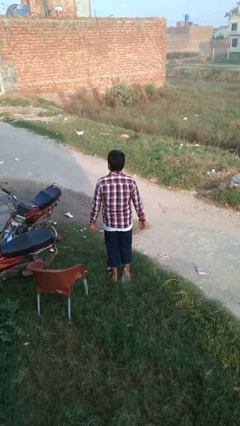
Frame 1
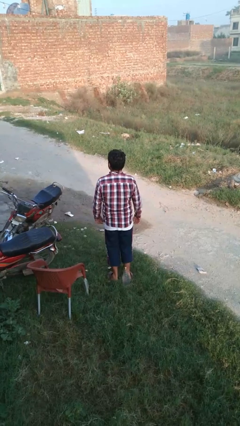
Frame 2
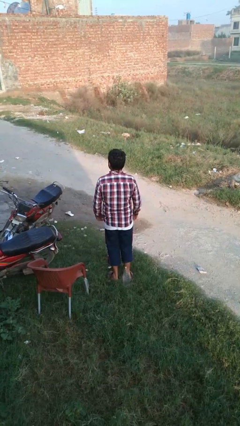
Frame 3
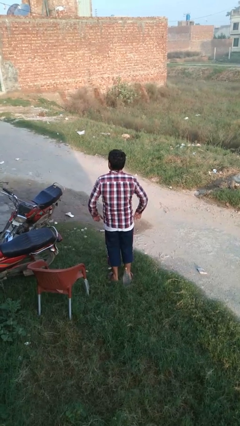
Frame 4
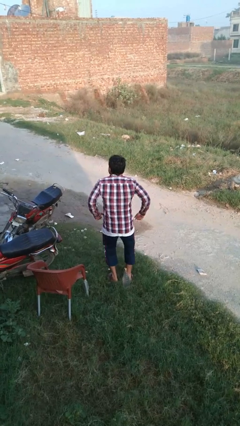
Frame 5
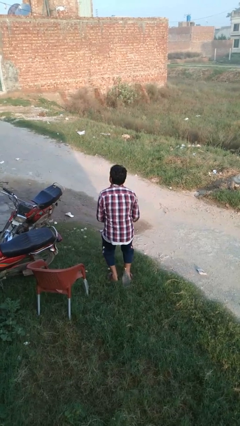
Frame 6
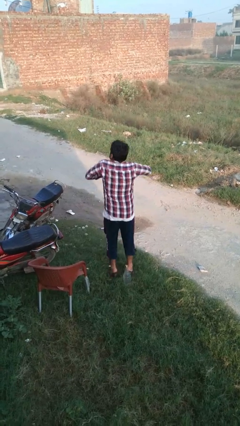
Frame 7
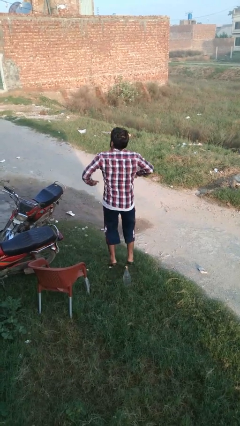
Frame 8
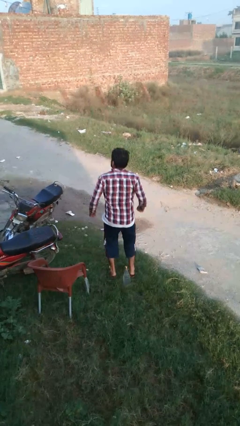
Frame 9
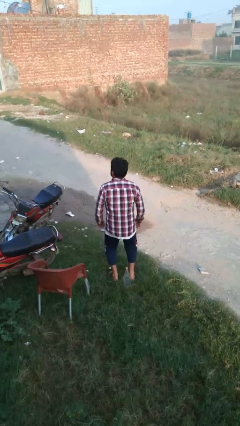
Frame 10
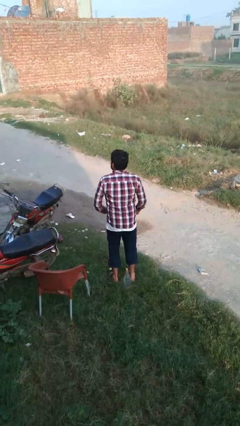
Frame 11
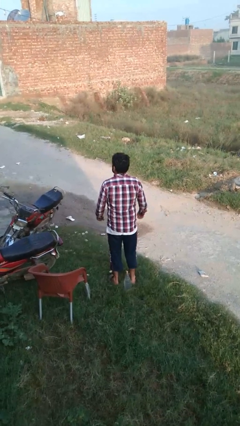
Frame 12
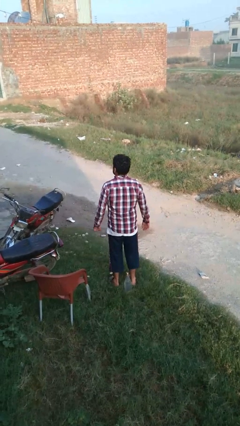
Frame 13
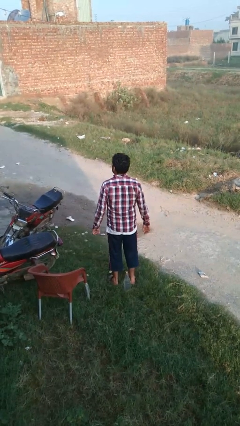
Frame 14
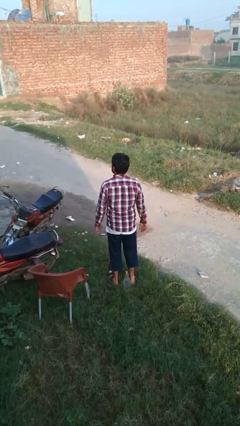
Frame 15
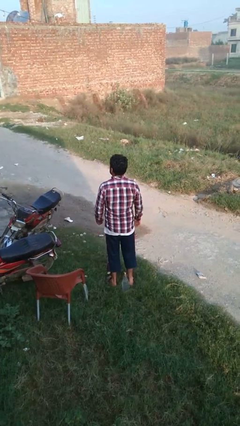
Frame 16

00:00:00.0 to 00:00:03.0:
person jumps

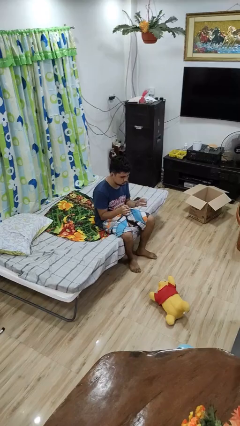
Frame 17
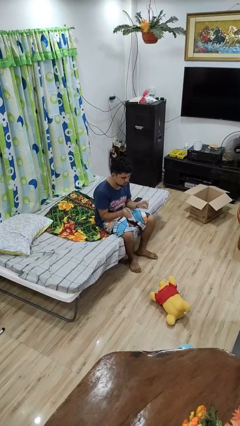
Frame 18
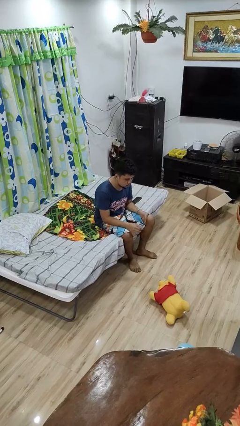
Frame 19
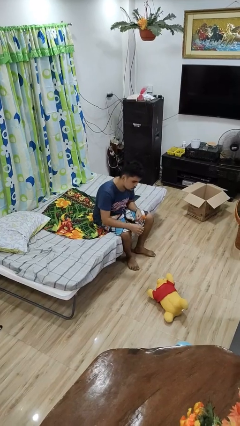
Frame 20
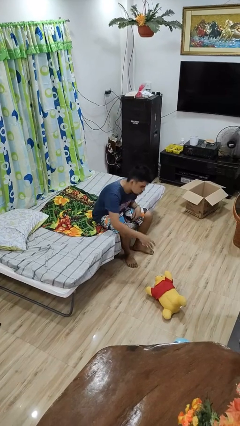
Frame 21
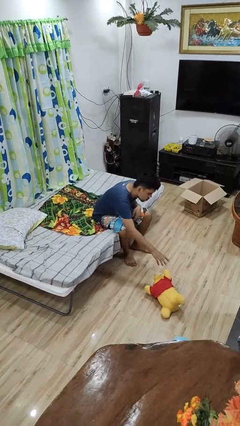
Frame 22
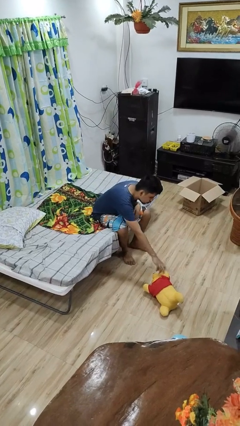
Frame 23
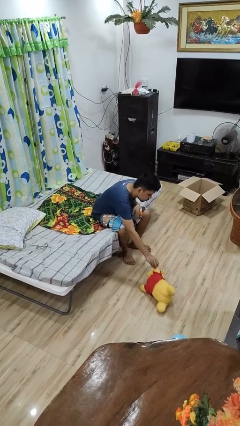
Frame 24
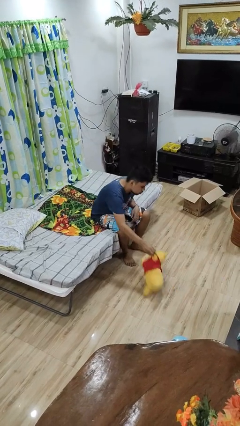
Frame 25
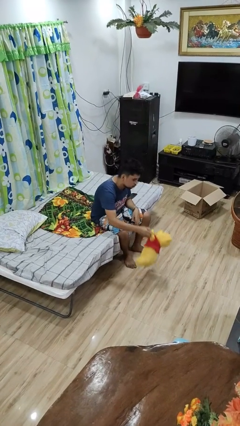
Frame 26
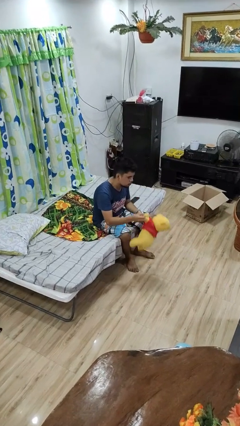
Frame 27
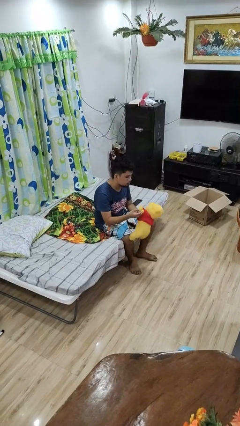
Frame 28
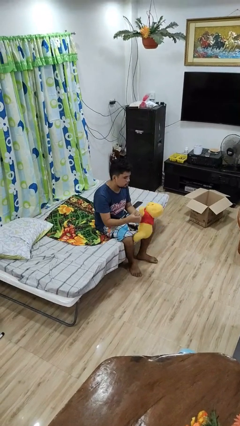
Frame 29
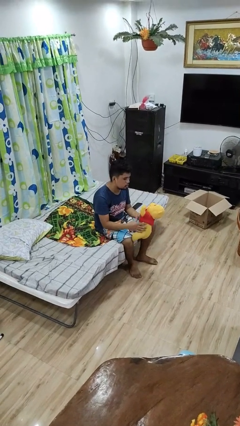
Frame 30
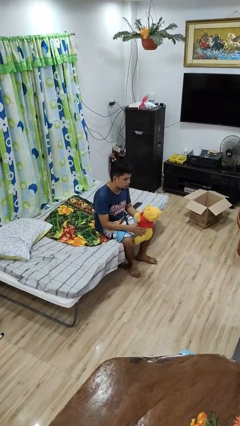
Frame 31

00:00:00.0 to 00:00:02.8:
person picks up object from floor

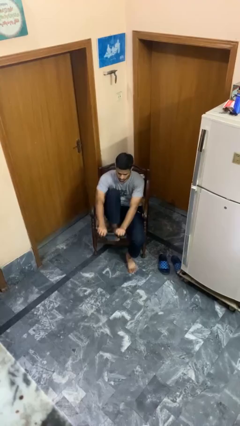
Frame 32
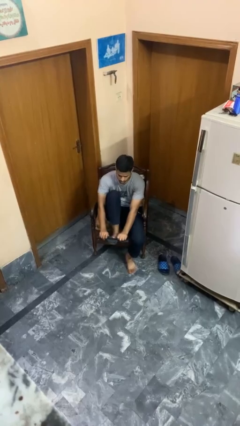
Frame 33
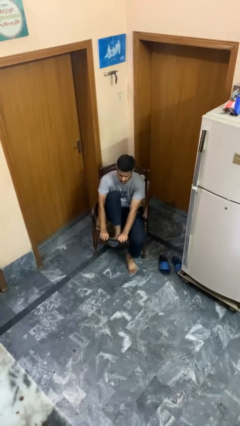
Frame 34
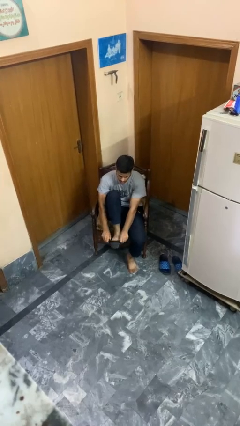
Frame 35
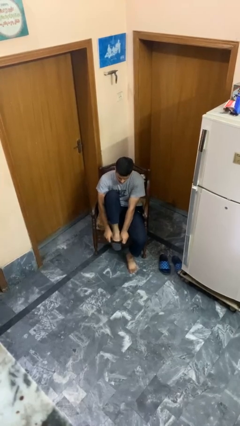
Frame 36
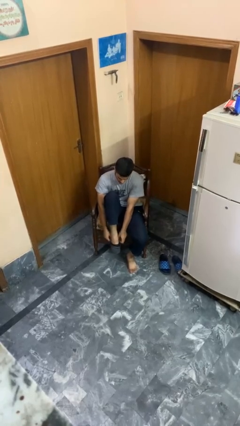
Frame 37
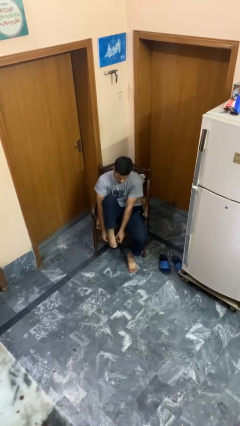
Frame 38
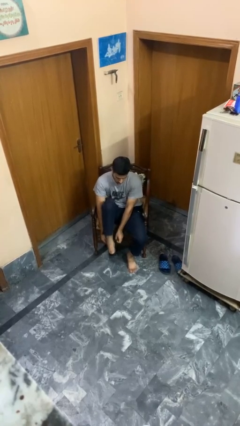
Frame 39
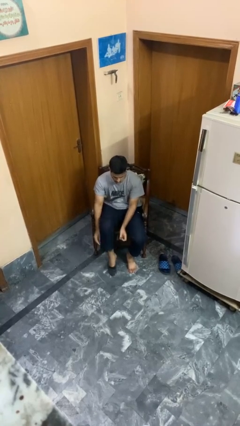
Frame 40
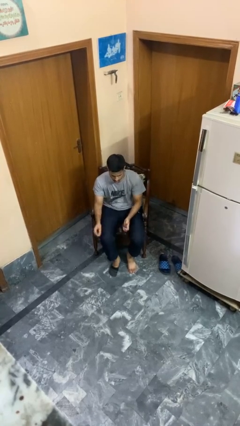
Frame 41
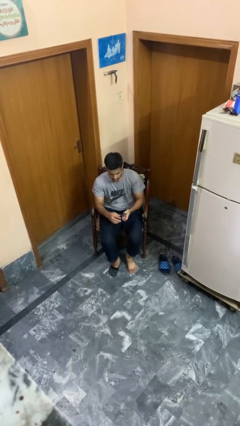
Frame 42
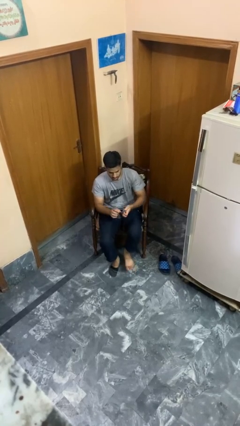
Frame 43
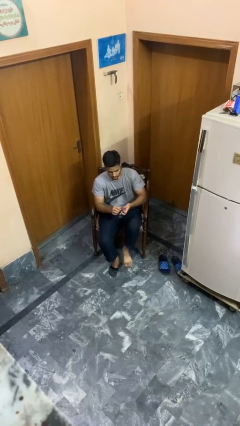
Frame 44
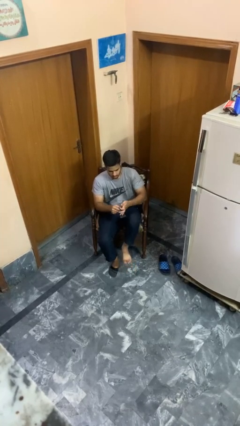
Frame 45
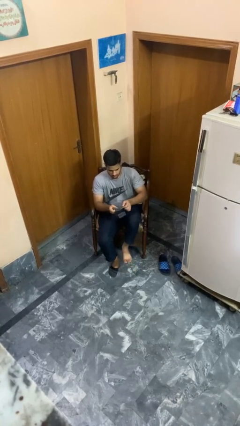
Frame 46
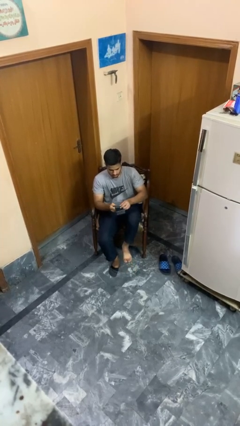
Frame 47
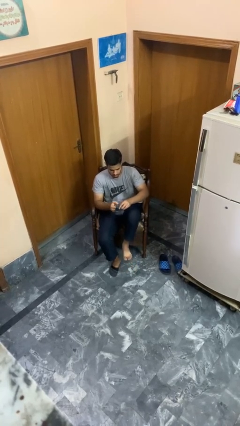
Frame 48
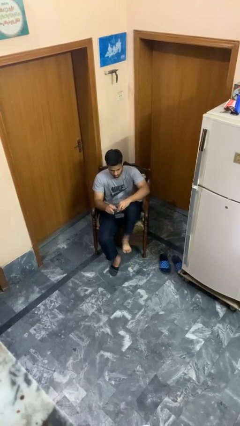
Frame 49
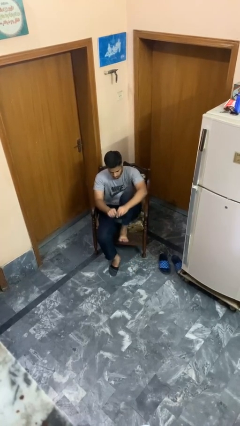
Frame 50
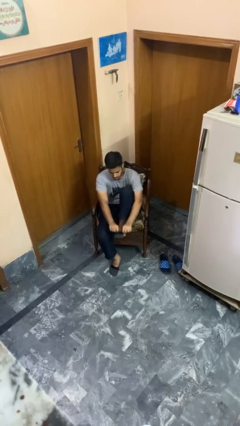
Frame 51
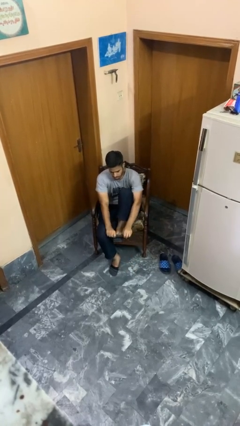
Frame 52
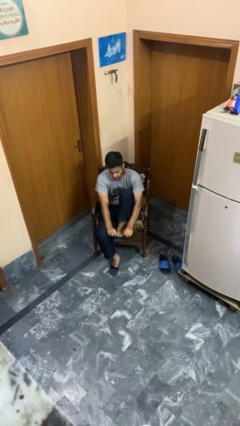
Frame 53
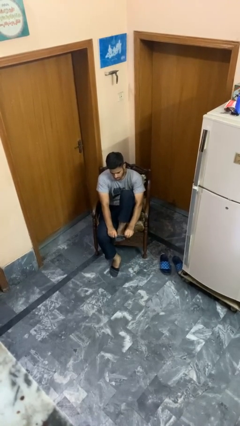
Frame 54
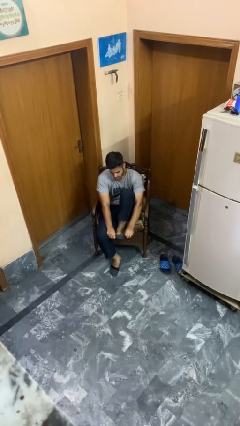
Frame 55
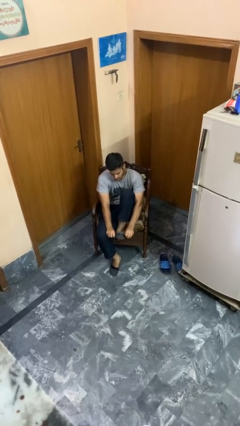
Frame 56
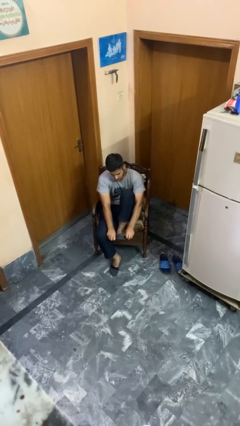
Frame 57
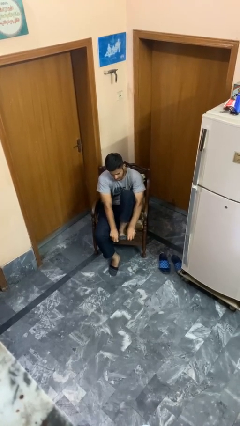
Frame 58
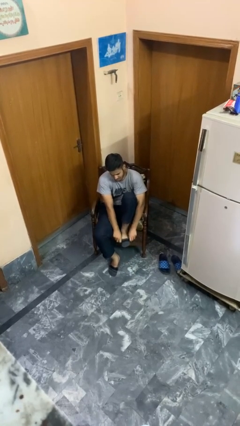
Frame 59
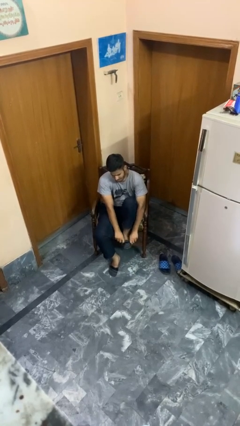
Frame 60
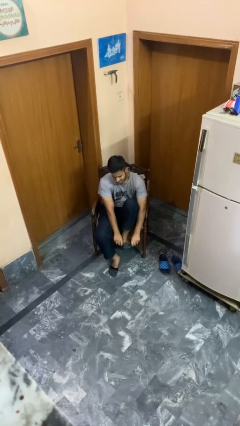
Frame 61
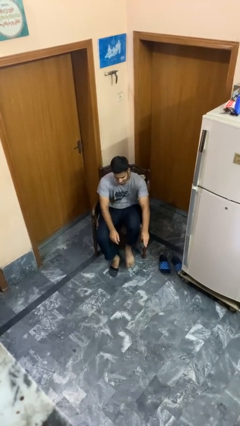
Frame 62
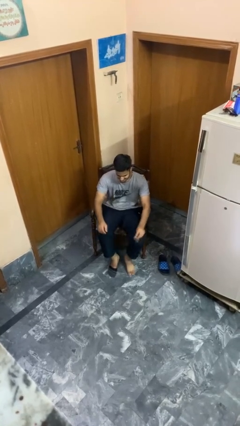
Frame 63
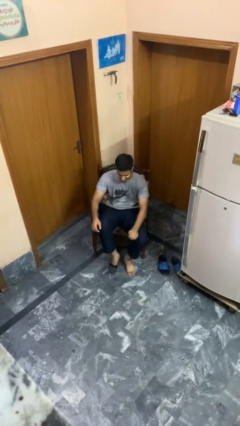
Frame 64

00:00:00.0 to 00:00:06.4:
person puts on socks

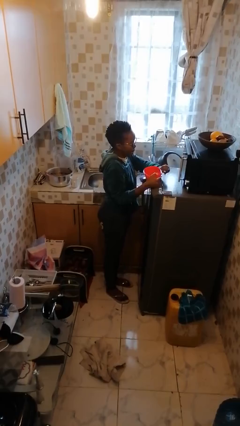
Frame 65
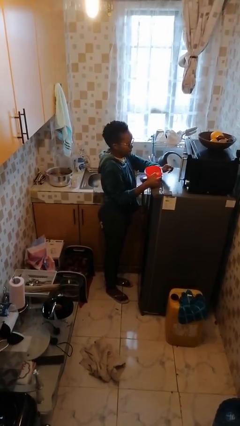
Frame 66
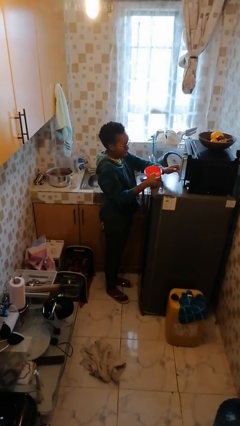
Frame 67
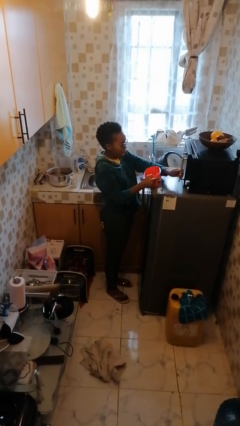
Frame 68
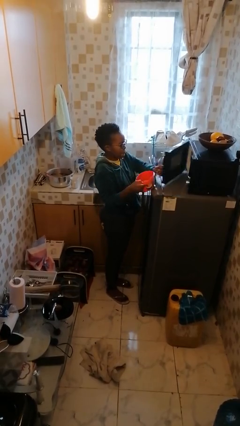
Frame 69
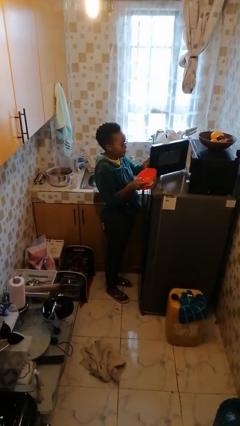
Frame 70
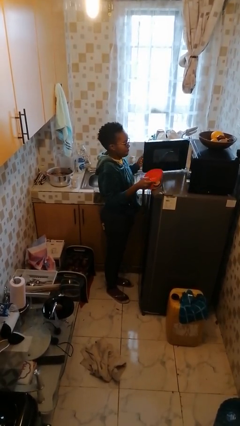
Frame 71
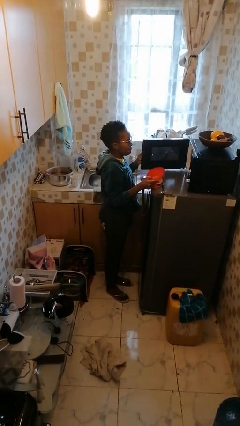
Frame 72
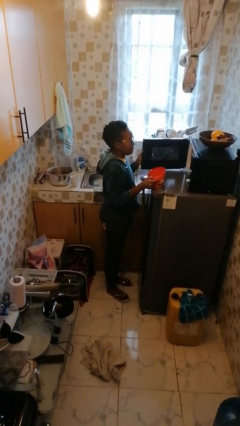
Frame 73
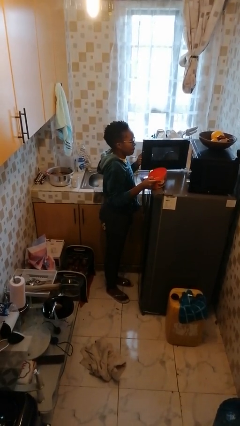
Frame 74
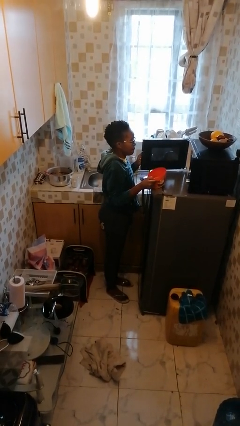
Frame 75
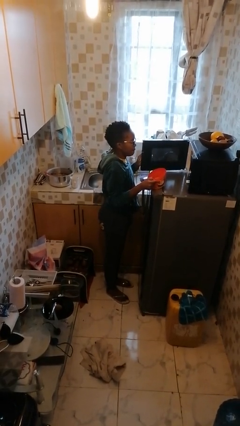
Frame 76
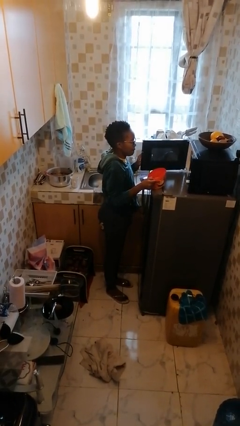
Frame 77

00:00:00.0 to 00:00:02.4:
person opens microwave

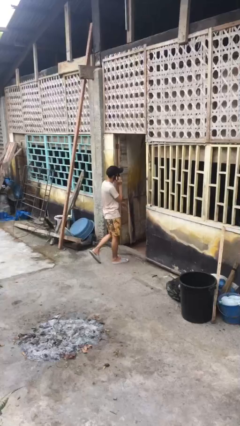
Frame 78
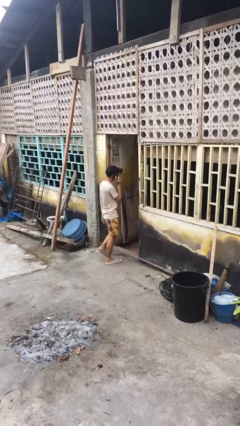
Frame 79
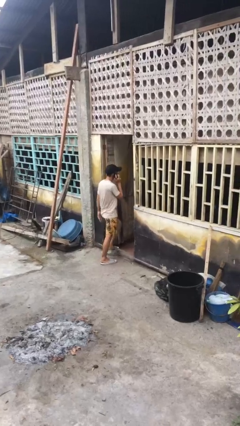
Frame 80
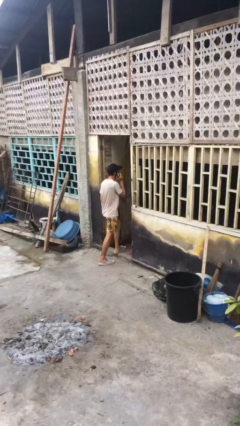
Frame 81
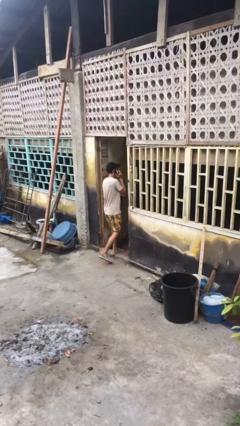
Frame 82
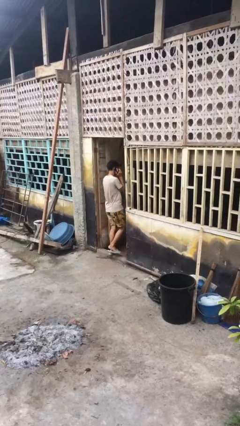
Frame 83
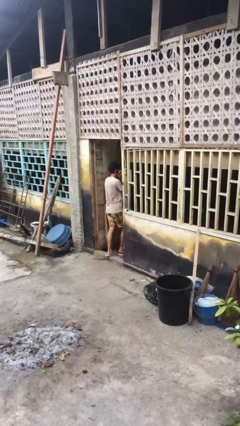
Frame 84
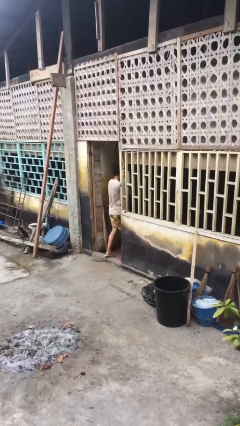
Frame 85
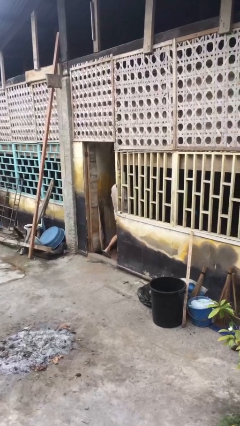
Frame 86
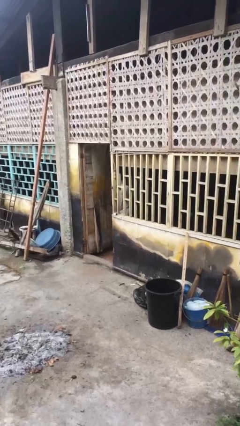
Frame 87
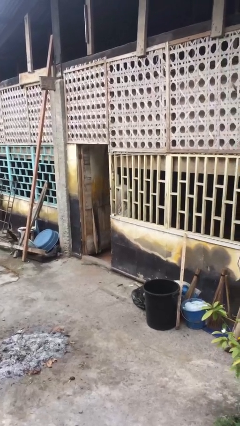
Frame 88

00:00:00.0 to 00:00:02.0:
person enters scene through structure

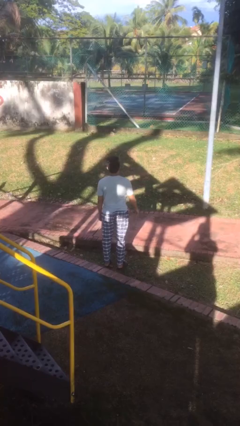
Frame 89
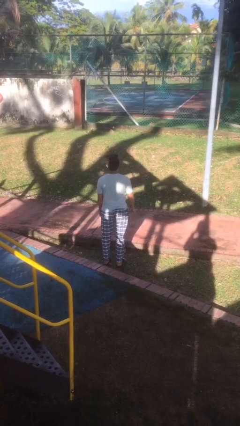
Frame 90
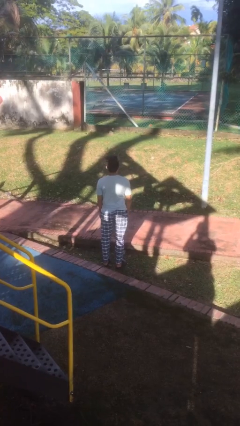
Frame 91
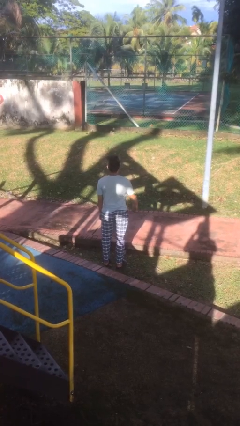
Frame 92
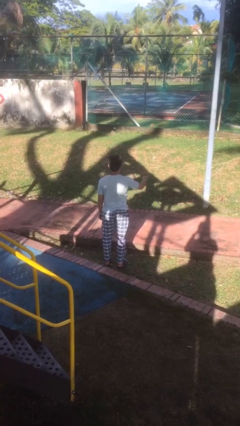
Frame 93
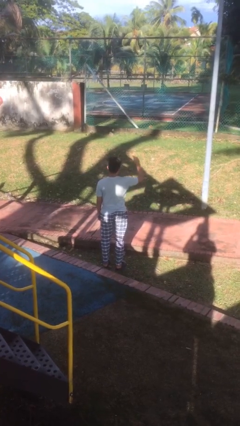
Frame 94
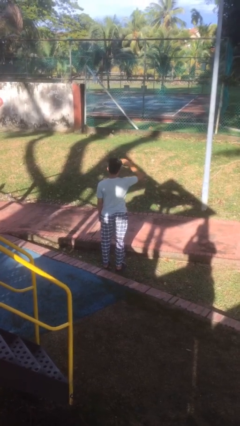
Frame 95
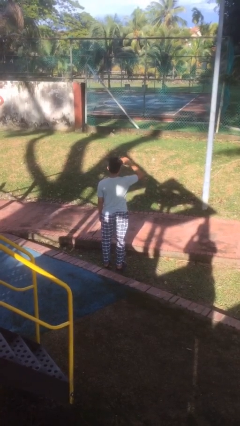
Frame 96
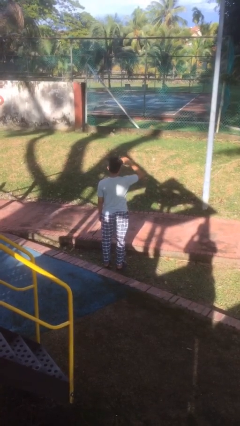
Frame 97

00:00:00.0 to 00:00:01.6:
person salutes
